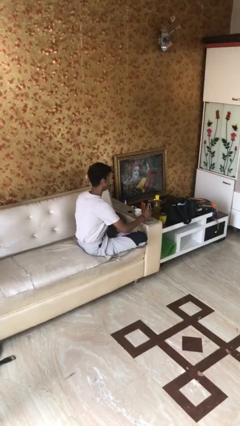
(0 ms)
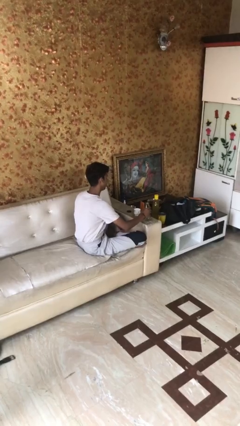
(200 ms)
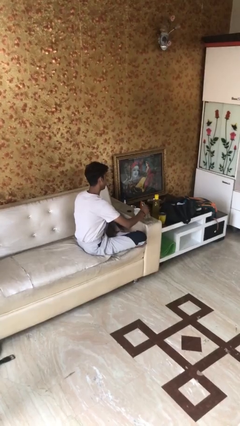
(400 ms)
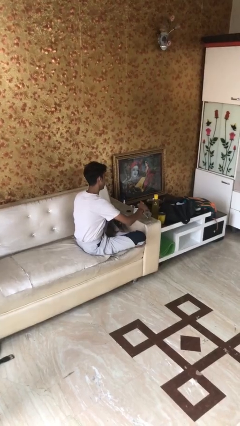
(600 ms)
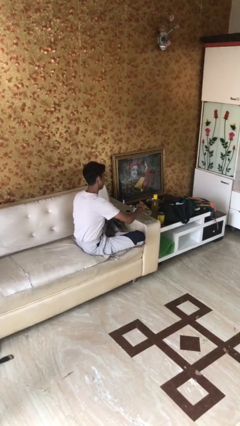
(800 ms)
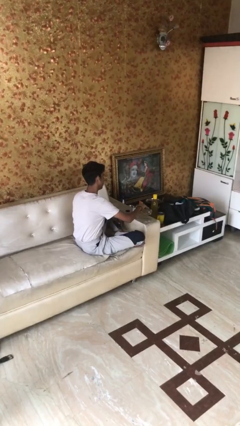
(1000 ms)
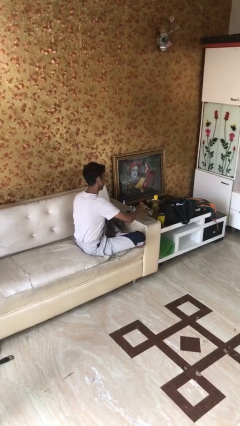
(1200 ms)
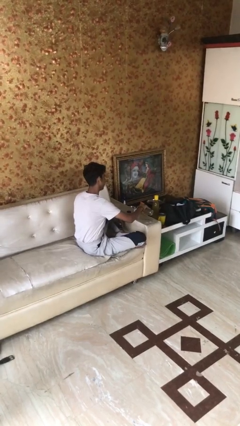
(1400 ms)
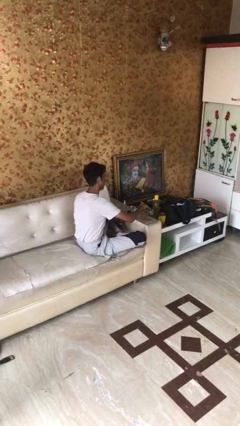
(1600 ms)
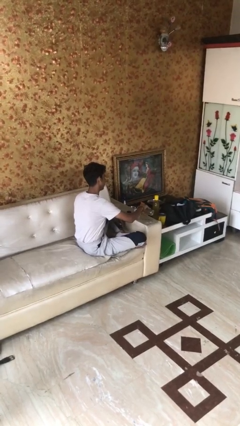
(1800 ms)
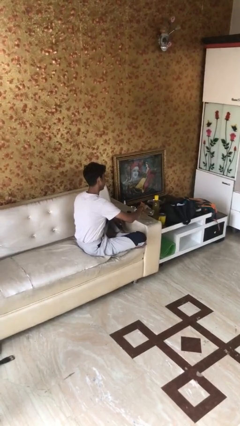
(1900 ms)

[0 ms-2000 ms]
person pours liquid into cup

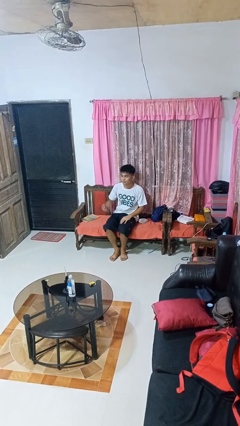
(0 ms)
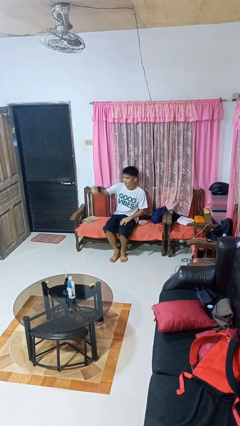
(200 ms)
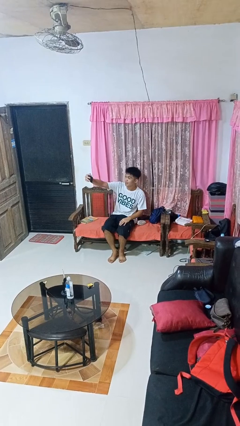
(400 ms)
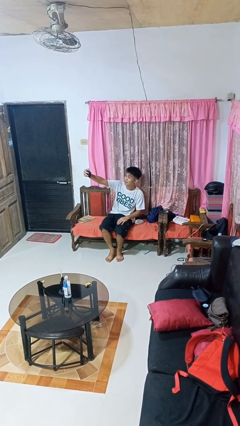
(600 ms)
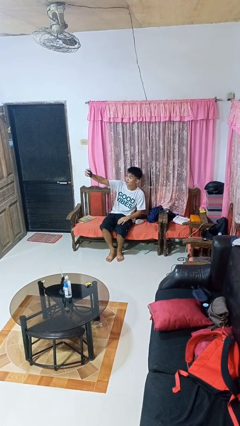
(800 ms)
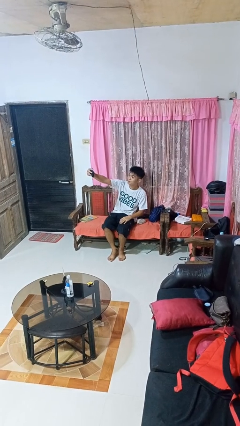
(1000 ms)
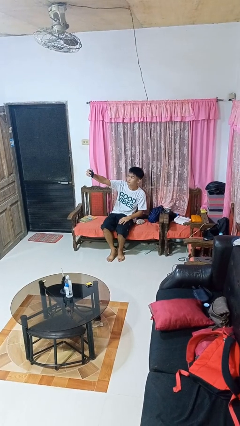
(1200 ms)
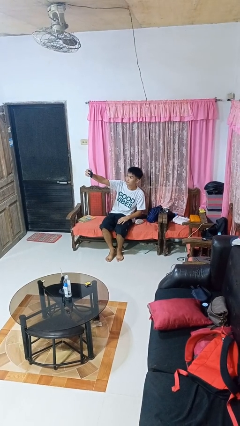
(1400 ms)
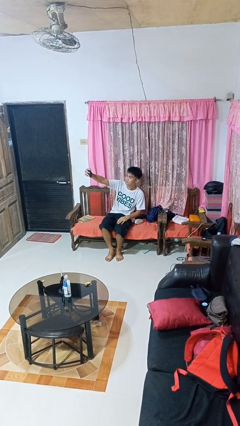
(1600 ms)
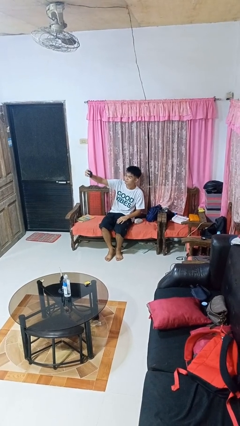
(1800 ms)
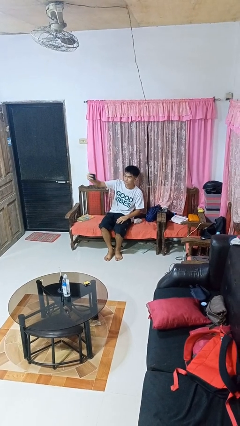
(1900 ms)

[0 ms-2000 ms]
person takes selfie

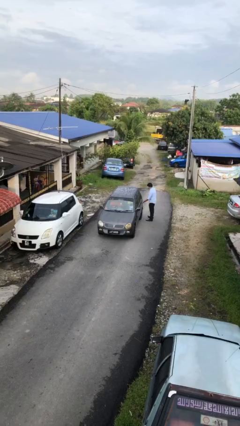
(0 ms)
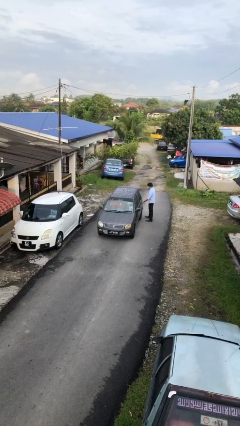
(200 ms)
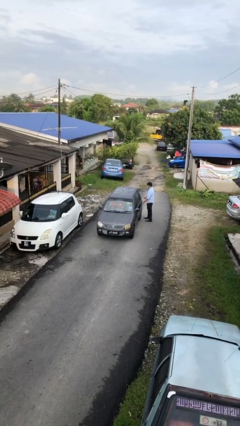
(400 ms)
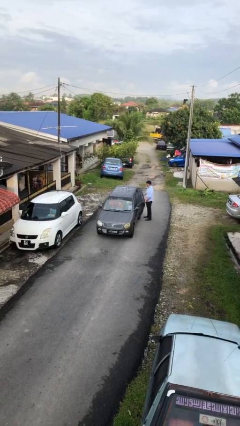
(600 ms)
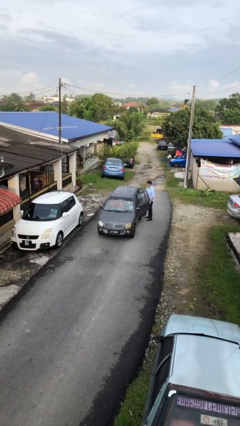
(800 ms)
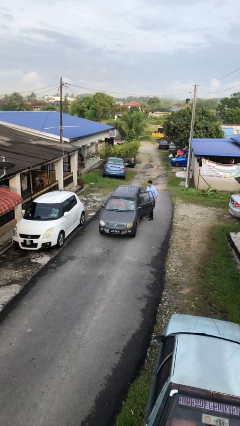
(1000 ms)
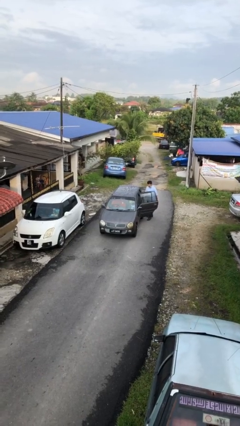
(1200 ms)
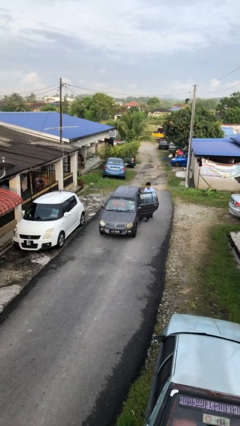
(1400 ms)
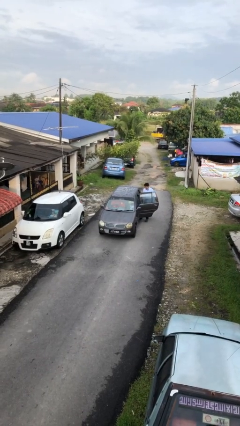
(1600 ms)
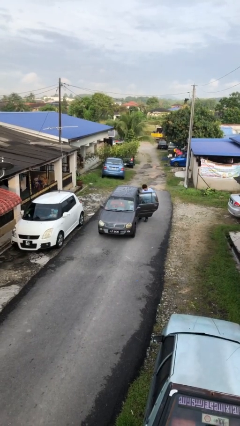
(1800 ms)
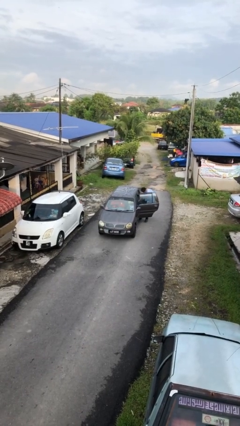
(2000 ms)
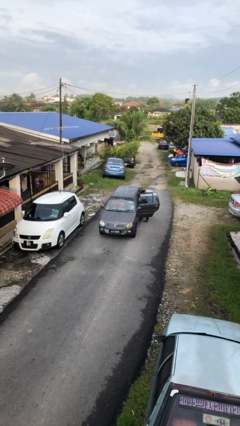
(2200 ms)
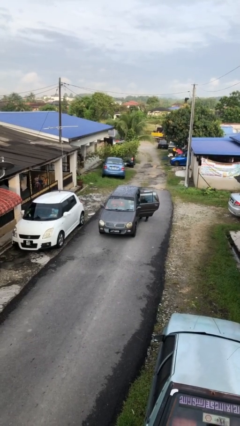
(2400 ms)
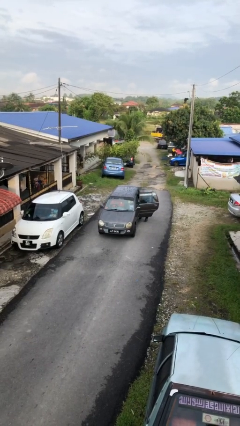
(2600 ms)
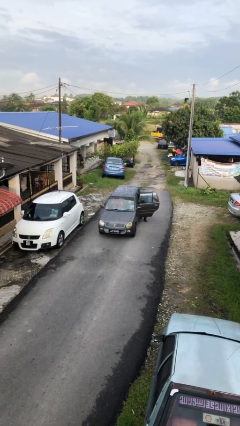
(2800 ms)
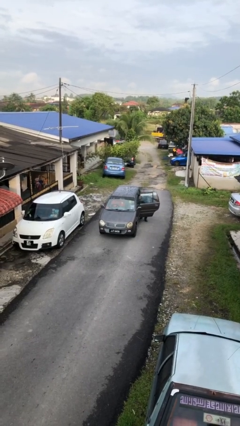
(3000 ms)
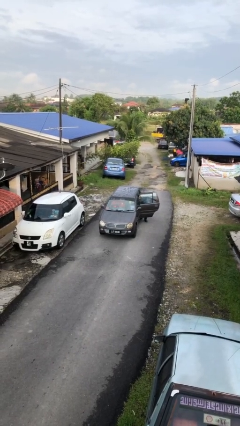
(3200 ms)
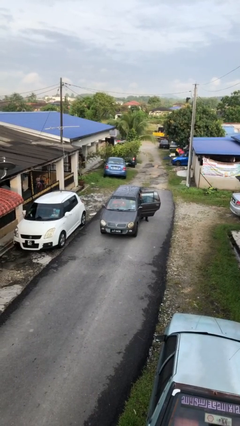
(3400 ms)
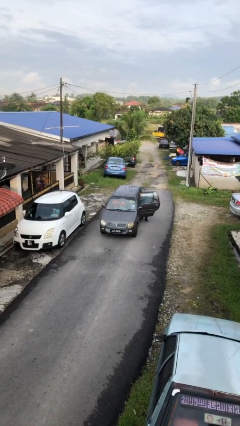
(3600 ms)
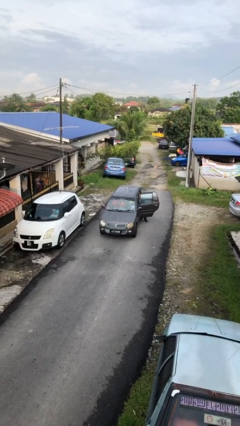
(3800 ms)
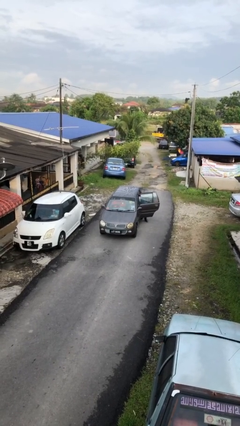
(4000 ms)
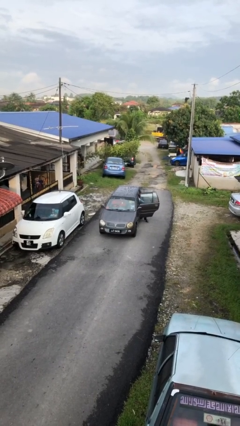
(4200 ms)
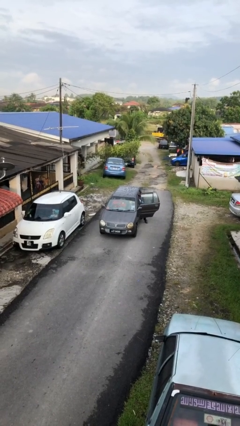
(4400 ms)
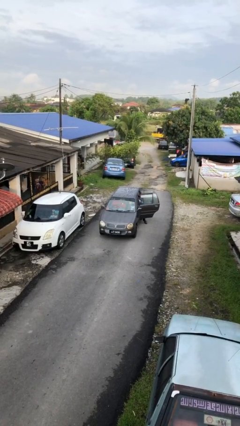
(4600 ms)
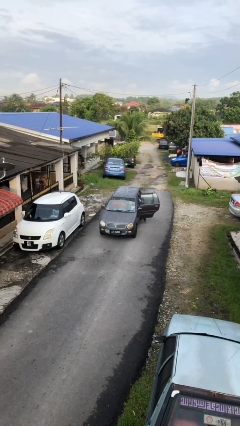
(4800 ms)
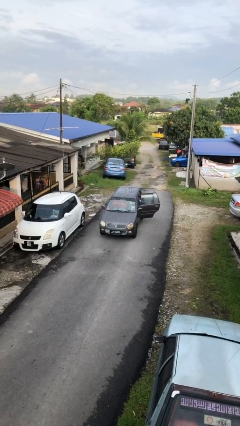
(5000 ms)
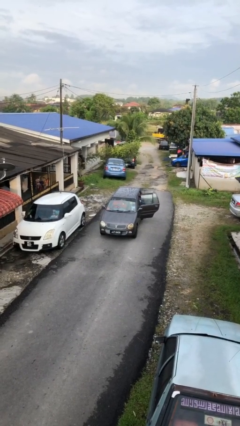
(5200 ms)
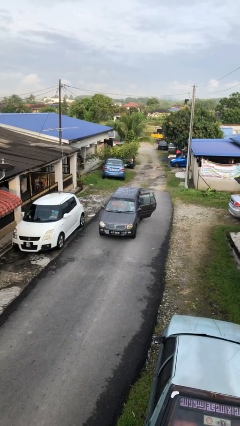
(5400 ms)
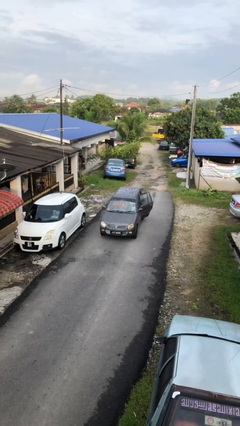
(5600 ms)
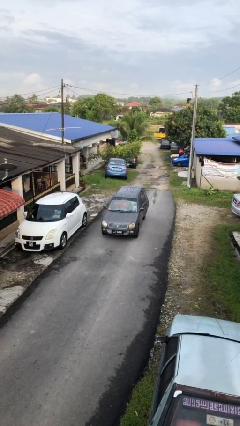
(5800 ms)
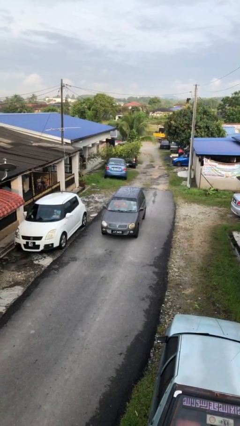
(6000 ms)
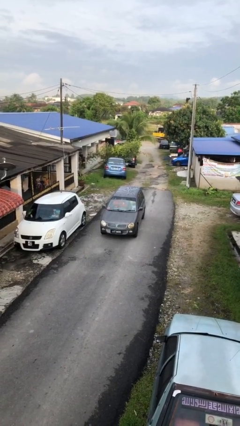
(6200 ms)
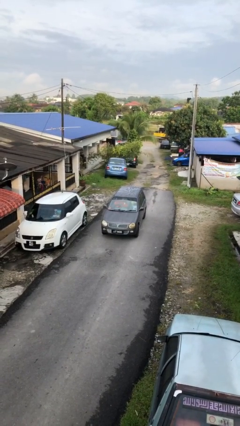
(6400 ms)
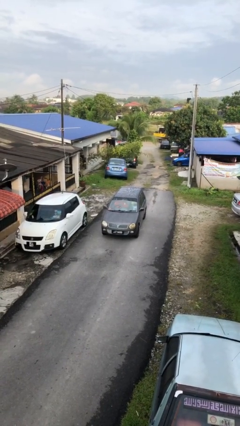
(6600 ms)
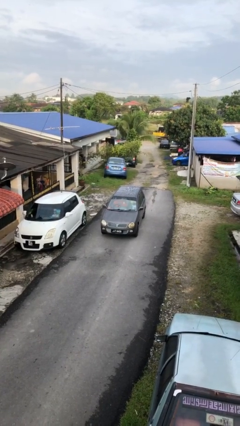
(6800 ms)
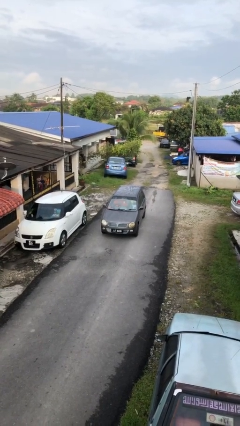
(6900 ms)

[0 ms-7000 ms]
car picks up person

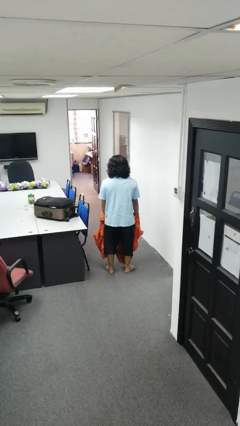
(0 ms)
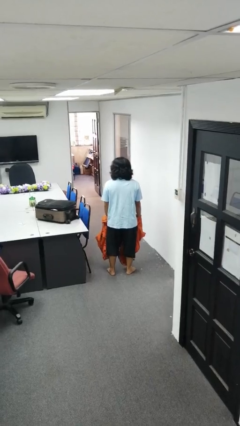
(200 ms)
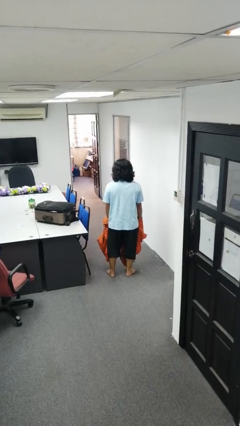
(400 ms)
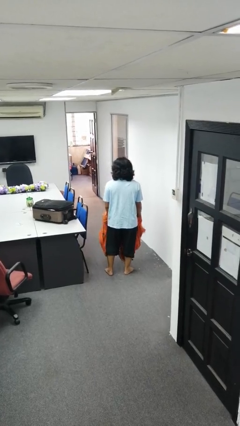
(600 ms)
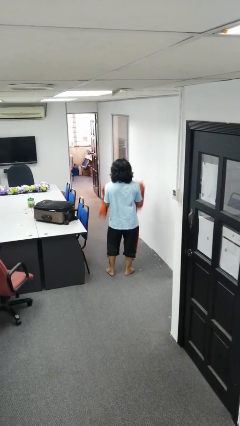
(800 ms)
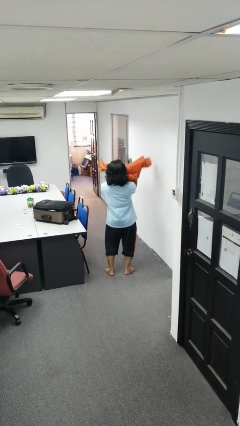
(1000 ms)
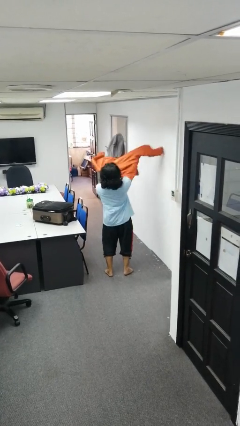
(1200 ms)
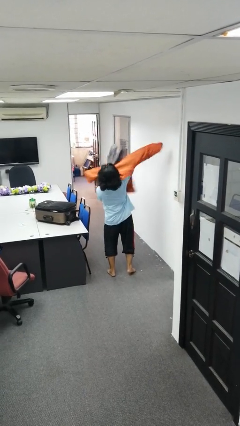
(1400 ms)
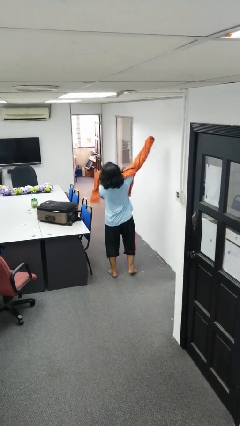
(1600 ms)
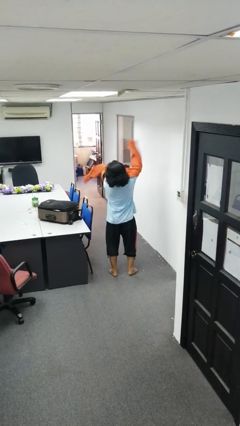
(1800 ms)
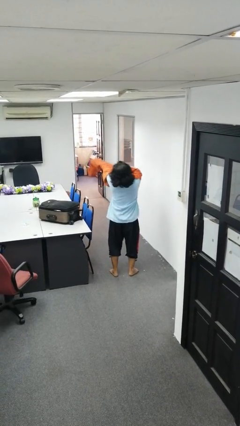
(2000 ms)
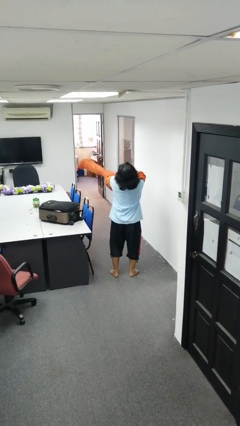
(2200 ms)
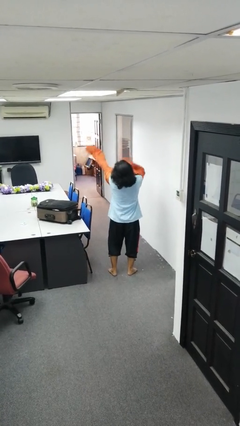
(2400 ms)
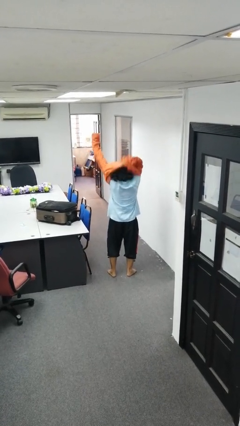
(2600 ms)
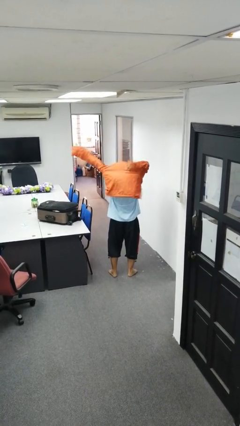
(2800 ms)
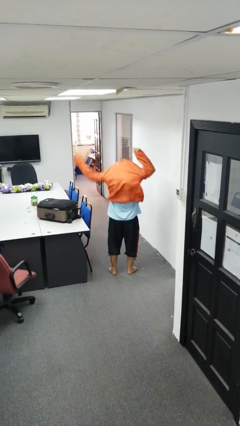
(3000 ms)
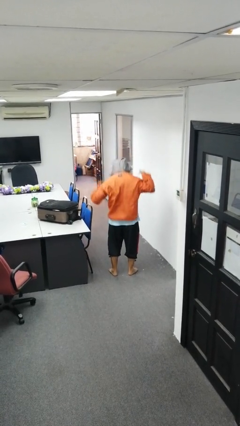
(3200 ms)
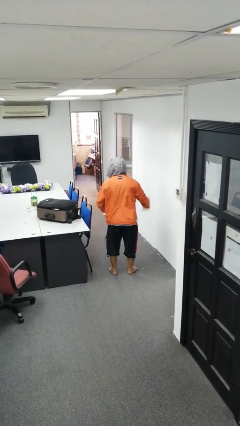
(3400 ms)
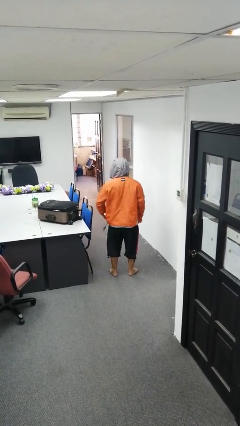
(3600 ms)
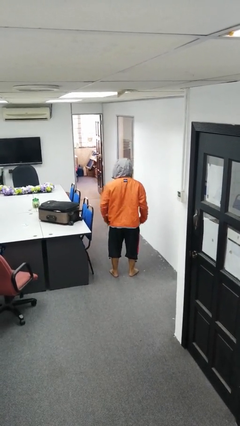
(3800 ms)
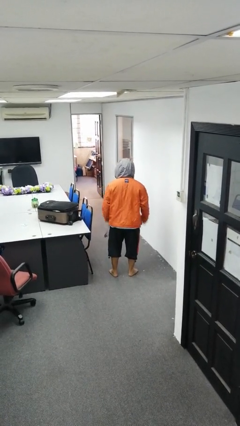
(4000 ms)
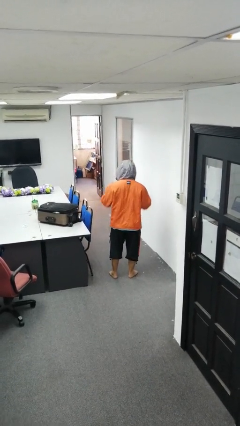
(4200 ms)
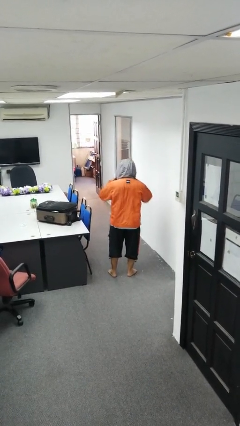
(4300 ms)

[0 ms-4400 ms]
person puts on hoodie

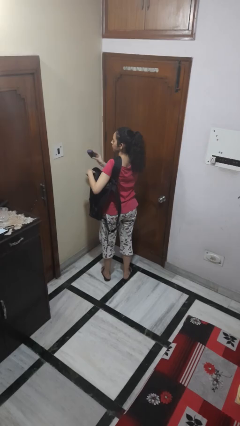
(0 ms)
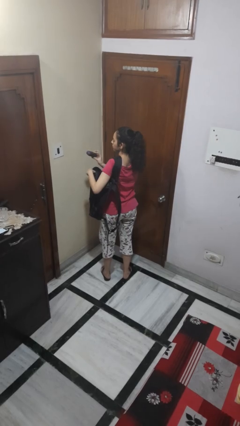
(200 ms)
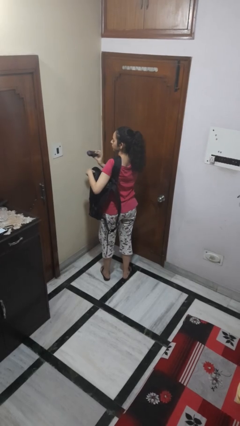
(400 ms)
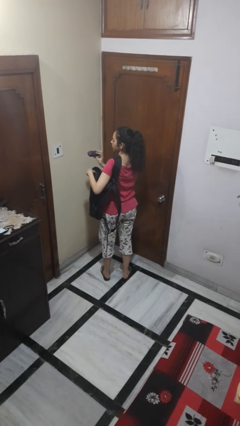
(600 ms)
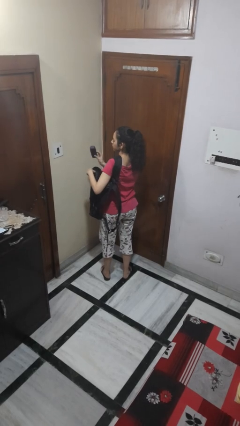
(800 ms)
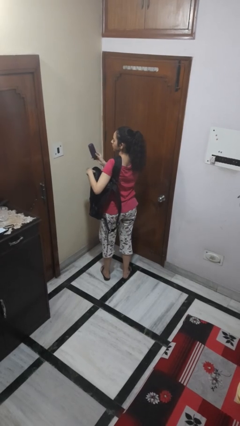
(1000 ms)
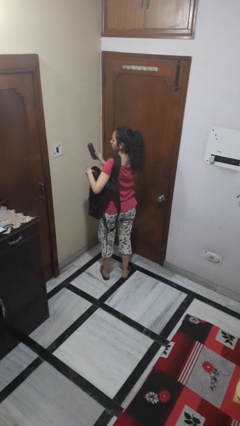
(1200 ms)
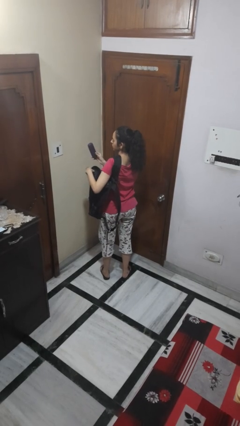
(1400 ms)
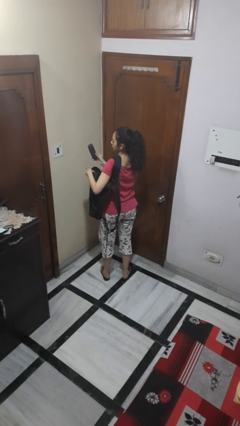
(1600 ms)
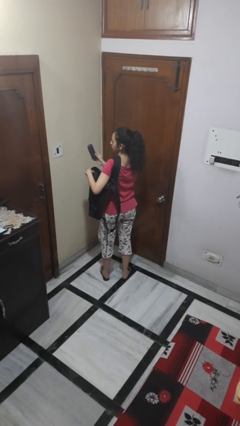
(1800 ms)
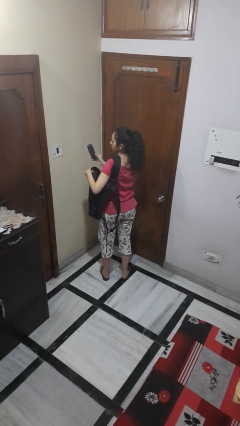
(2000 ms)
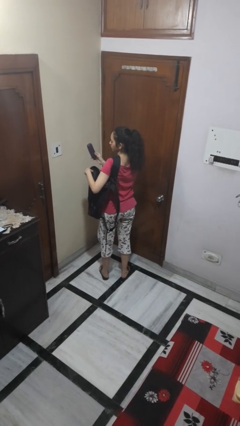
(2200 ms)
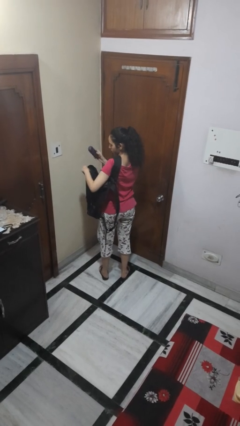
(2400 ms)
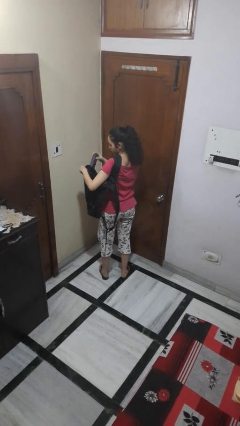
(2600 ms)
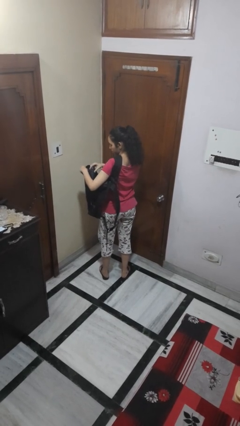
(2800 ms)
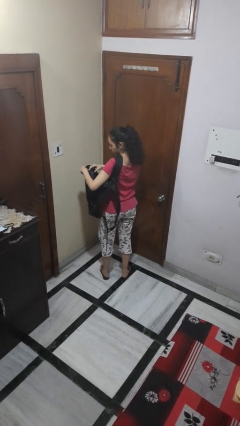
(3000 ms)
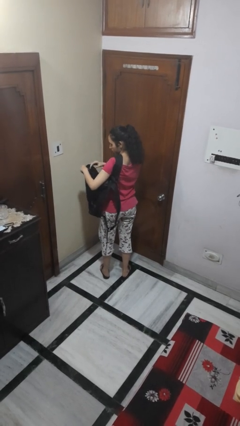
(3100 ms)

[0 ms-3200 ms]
person takes object from backpack
